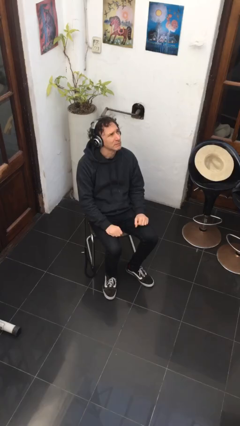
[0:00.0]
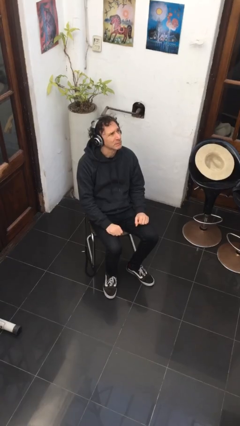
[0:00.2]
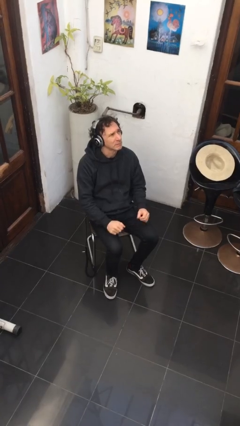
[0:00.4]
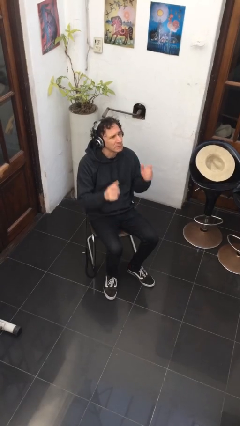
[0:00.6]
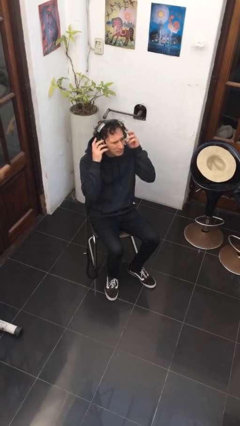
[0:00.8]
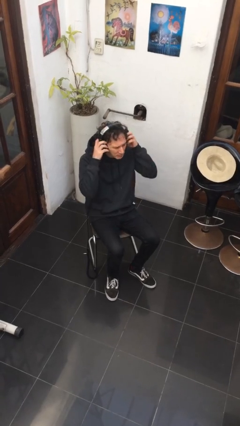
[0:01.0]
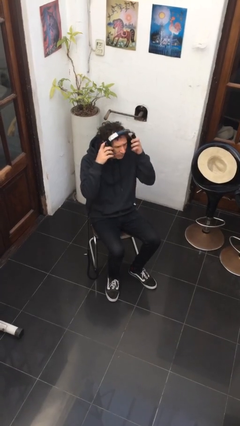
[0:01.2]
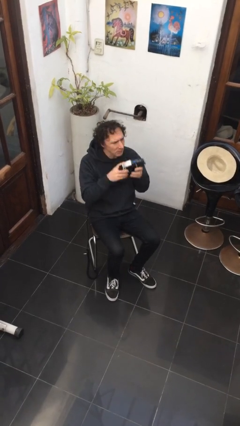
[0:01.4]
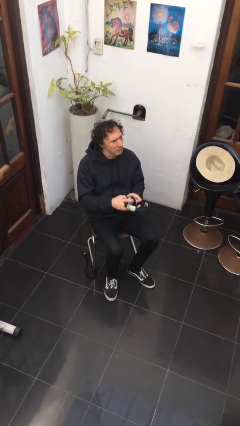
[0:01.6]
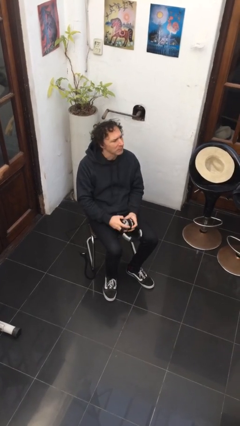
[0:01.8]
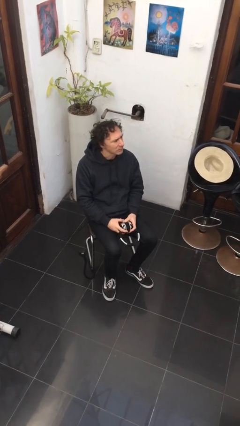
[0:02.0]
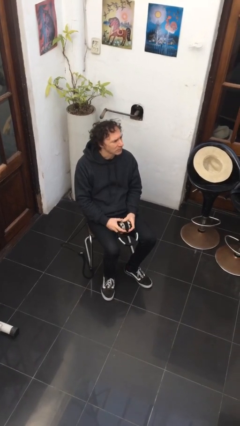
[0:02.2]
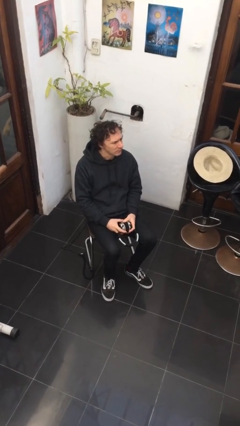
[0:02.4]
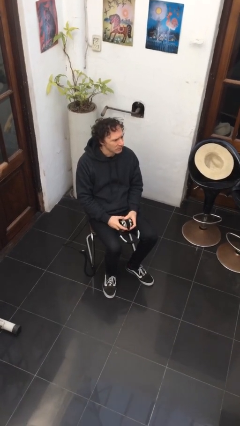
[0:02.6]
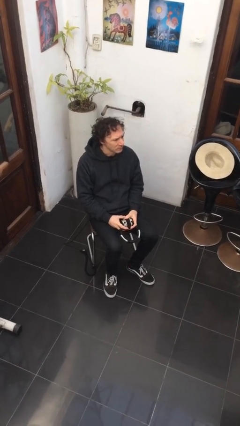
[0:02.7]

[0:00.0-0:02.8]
person takes off headphones

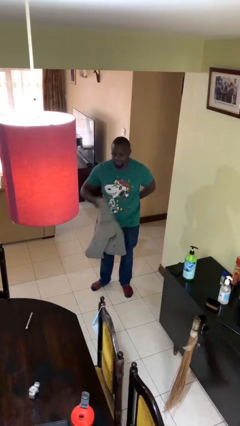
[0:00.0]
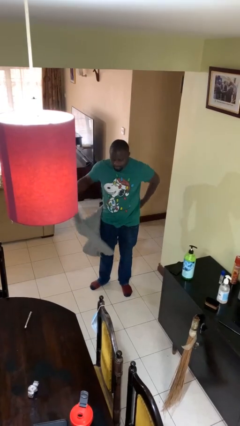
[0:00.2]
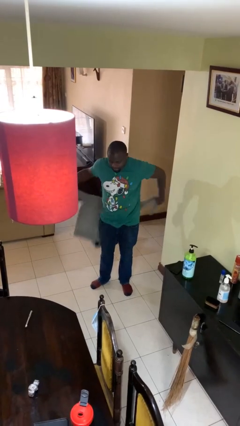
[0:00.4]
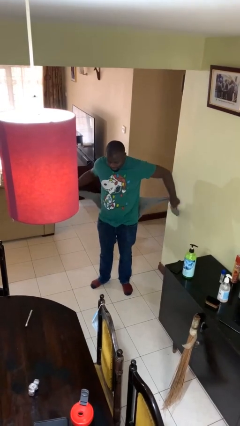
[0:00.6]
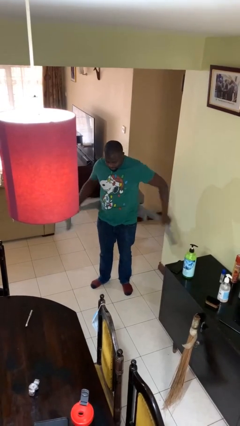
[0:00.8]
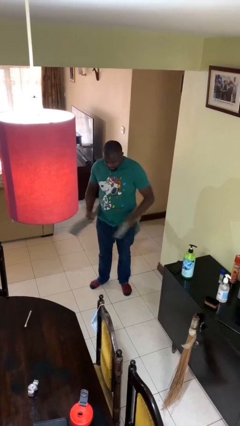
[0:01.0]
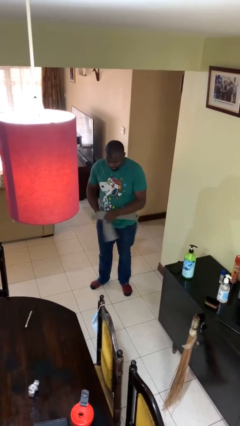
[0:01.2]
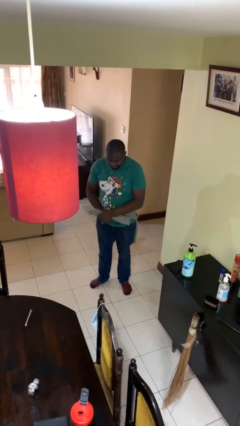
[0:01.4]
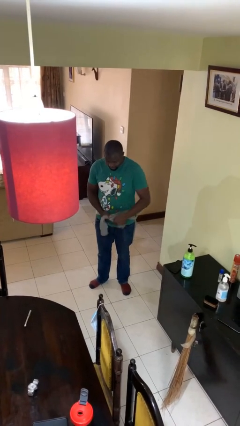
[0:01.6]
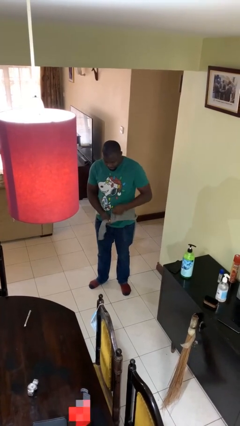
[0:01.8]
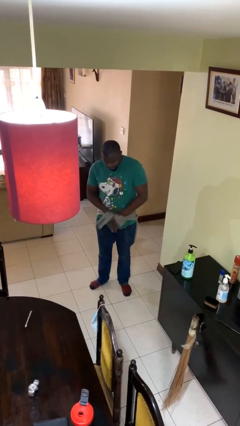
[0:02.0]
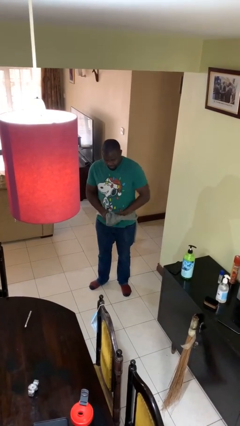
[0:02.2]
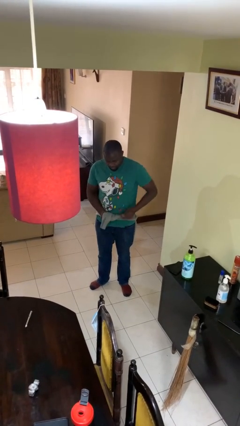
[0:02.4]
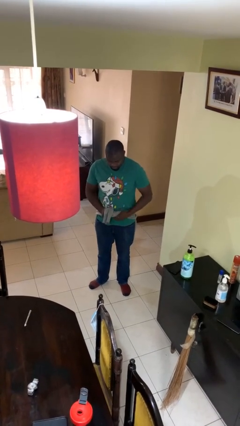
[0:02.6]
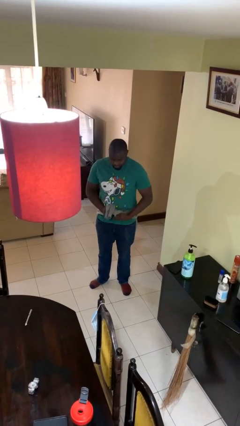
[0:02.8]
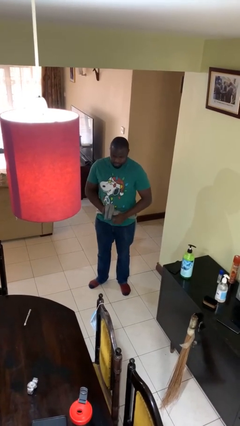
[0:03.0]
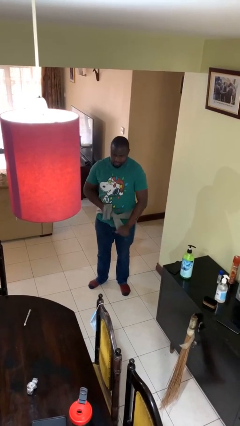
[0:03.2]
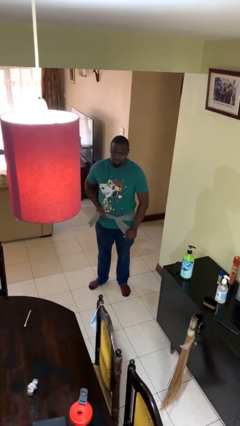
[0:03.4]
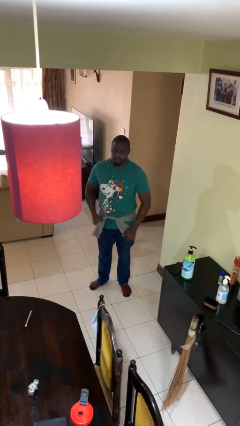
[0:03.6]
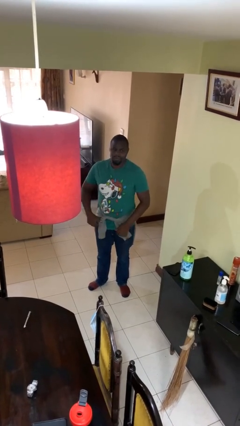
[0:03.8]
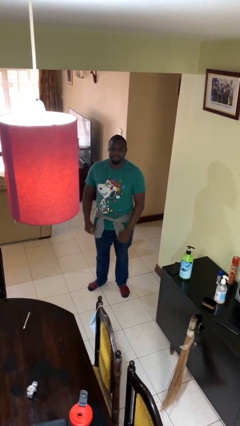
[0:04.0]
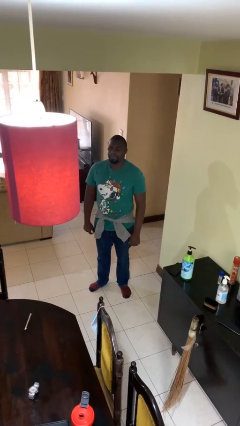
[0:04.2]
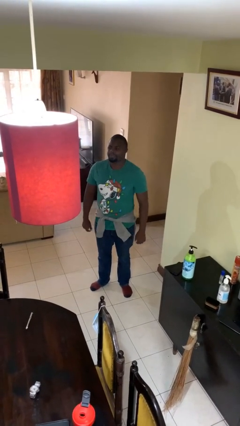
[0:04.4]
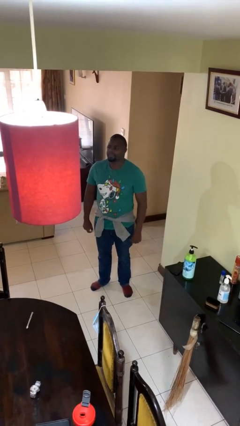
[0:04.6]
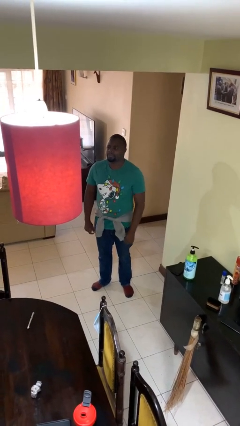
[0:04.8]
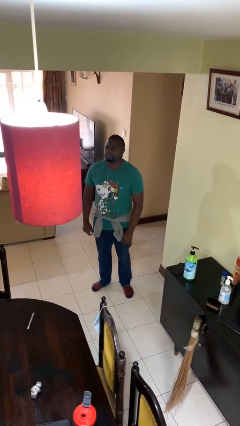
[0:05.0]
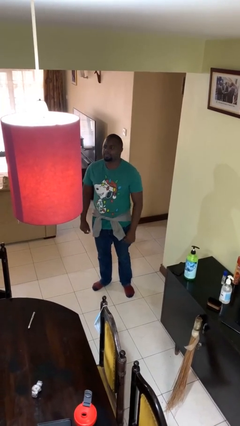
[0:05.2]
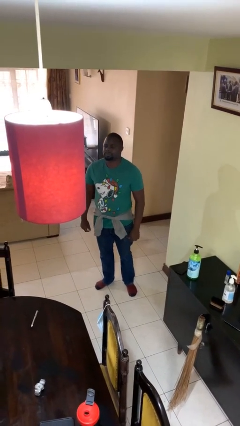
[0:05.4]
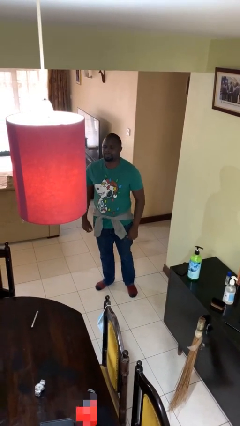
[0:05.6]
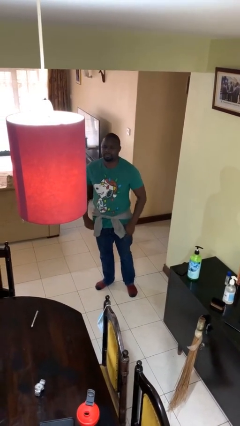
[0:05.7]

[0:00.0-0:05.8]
person ties jacket around waist

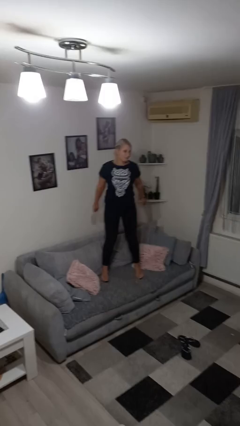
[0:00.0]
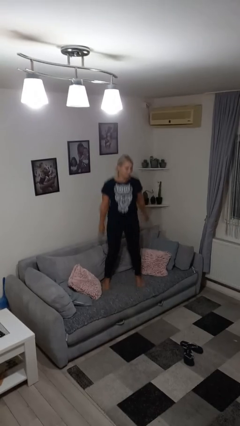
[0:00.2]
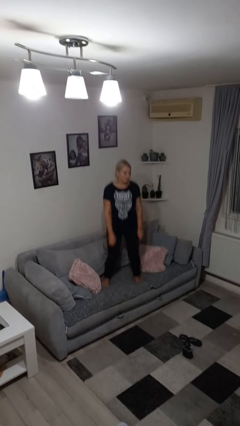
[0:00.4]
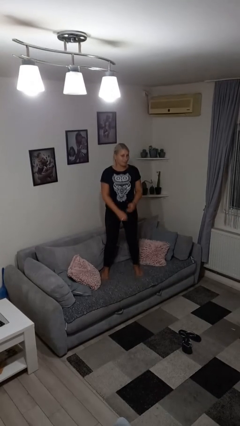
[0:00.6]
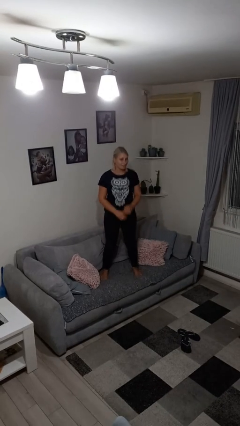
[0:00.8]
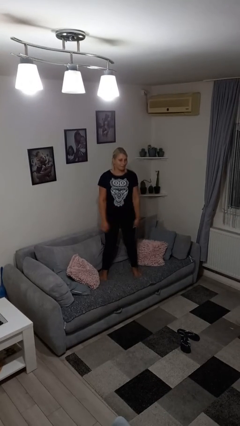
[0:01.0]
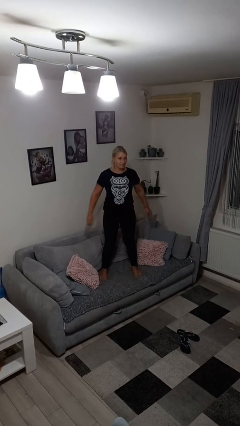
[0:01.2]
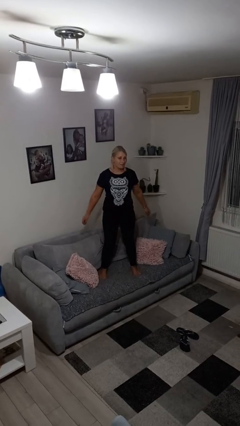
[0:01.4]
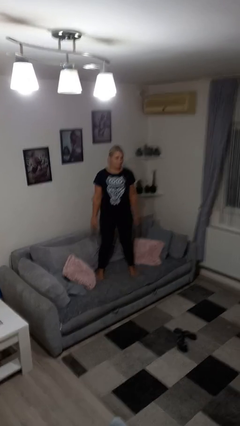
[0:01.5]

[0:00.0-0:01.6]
person jumps on couch

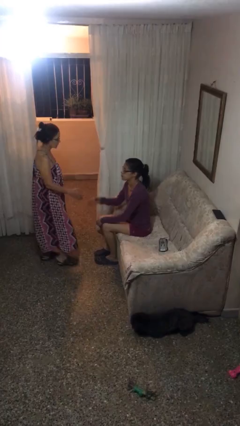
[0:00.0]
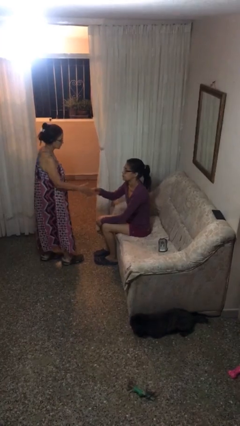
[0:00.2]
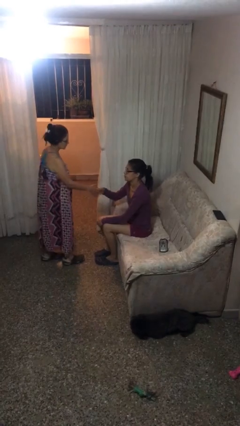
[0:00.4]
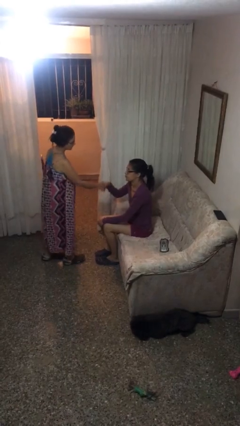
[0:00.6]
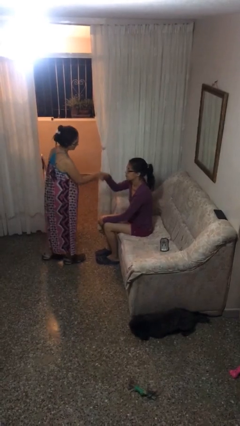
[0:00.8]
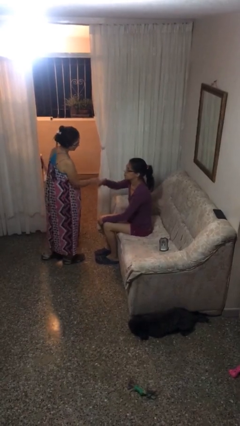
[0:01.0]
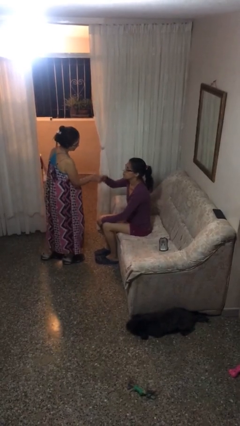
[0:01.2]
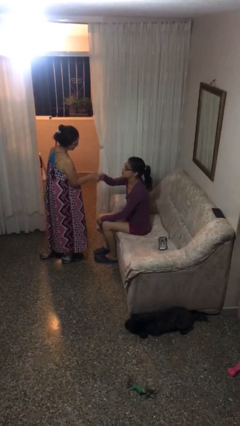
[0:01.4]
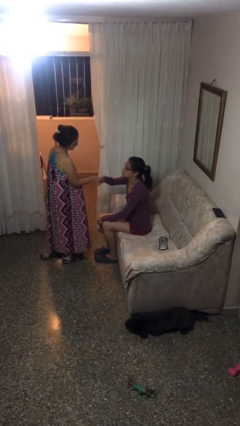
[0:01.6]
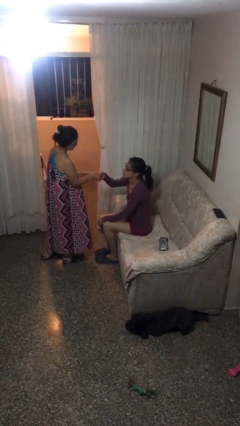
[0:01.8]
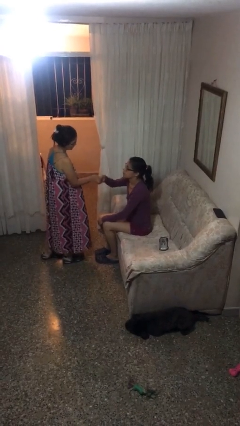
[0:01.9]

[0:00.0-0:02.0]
person shakes hand

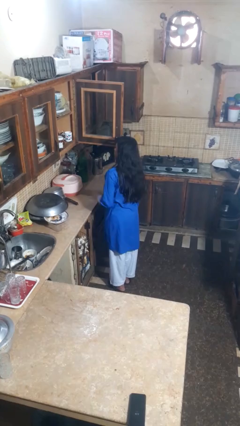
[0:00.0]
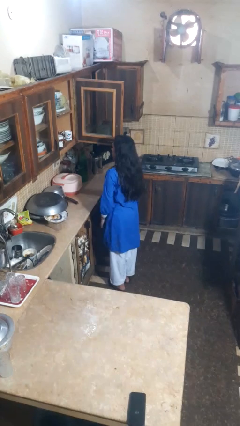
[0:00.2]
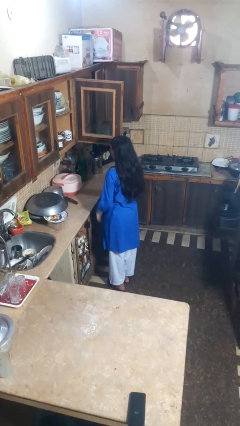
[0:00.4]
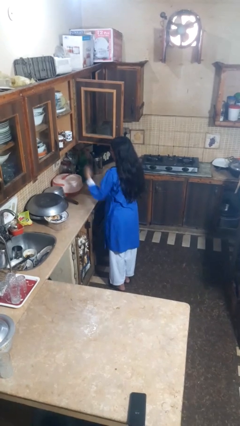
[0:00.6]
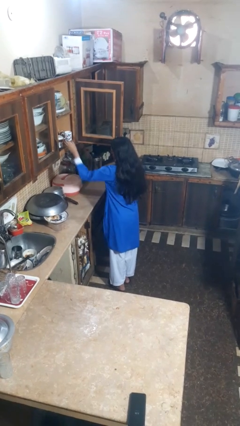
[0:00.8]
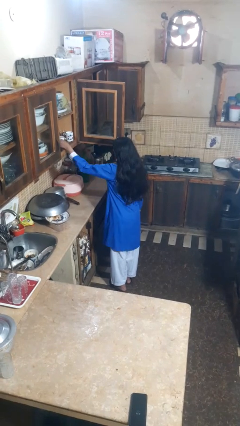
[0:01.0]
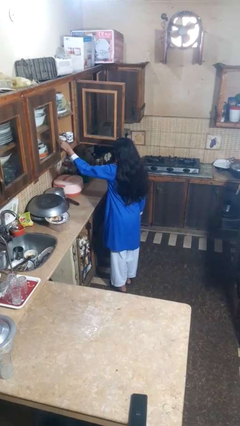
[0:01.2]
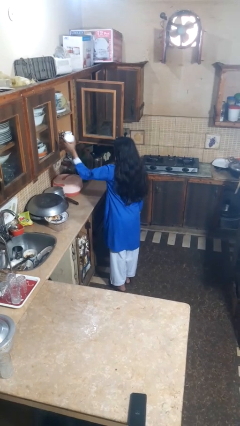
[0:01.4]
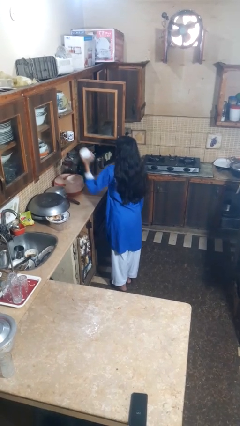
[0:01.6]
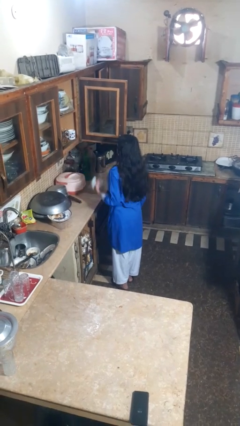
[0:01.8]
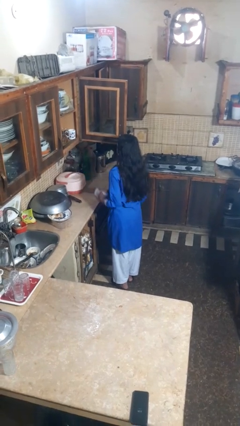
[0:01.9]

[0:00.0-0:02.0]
person takes object from cabinet

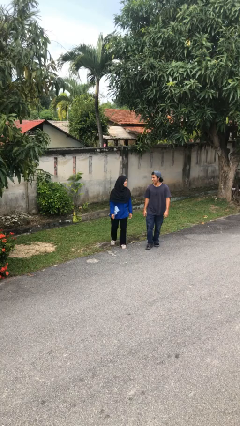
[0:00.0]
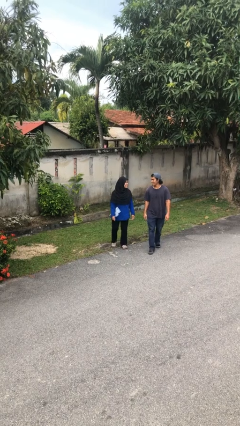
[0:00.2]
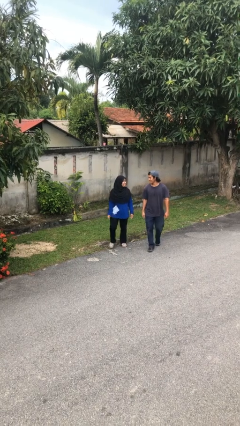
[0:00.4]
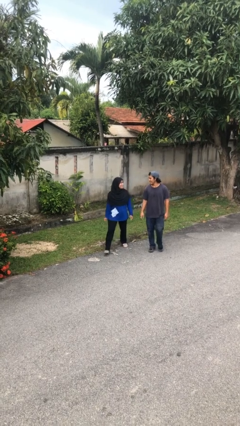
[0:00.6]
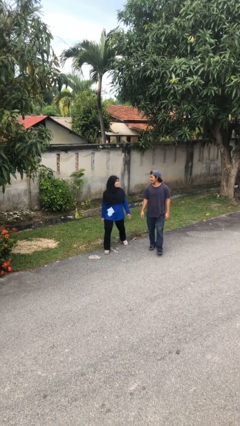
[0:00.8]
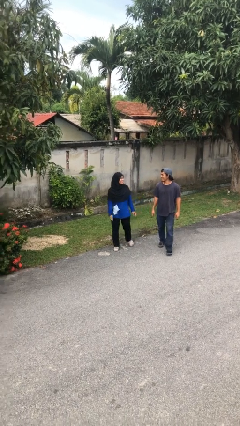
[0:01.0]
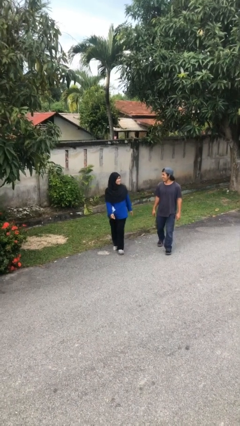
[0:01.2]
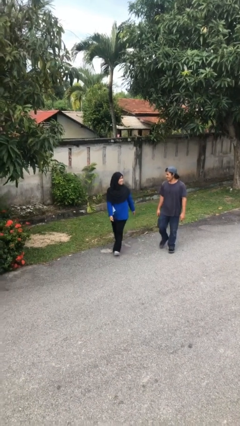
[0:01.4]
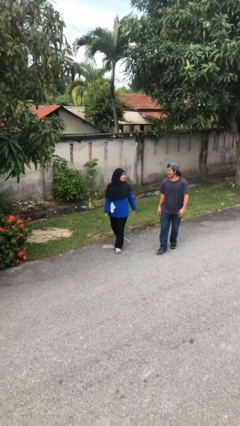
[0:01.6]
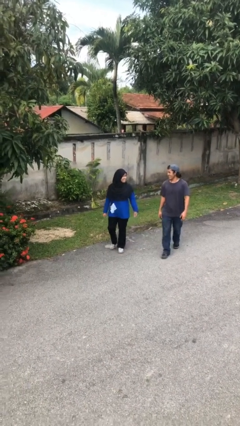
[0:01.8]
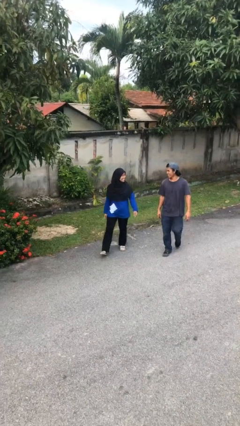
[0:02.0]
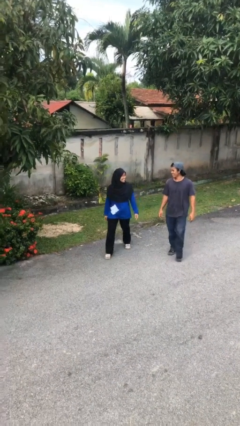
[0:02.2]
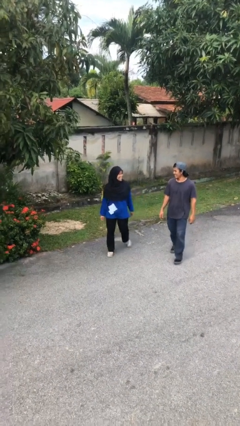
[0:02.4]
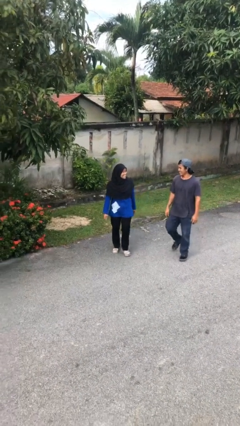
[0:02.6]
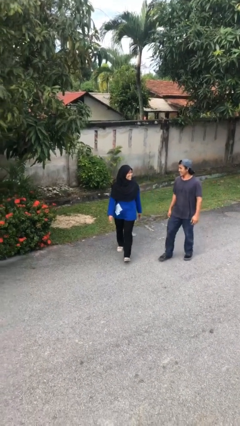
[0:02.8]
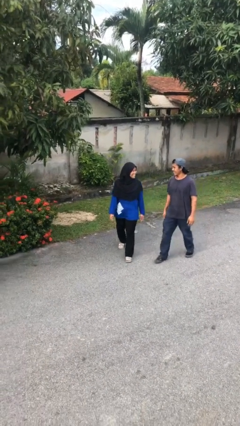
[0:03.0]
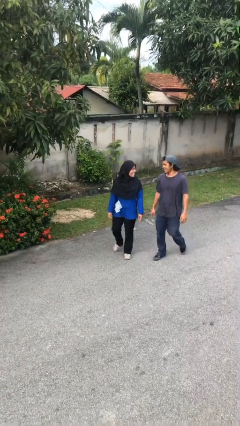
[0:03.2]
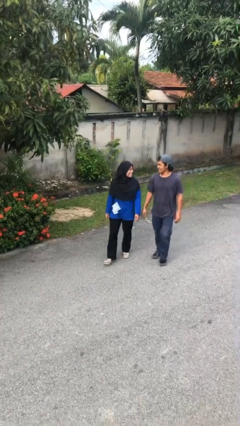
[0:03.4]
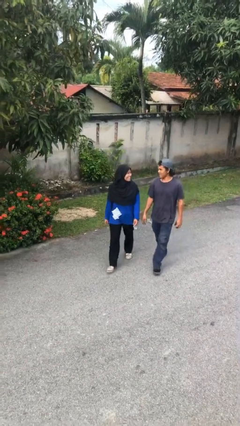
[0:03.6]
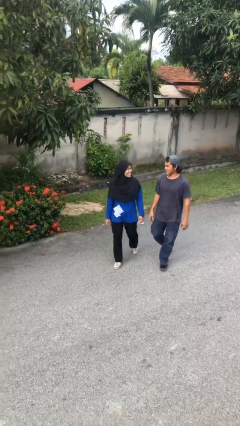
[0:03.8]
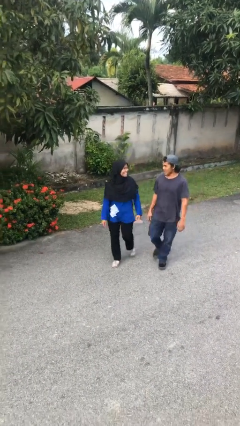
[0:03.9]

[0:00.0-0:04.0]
person talks to person
